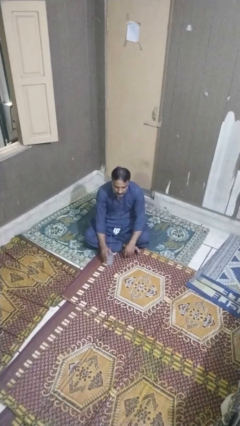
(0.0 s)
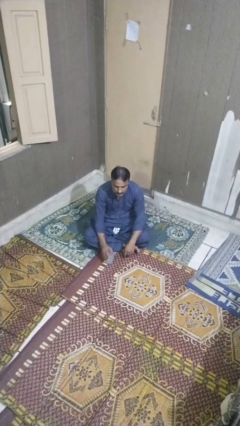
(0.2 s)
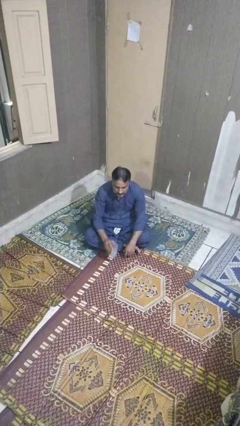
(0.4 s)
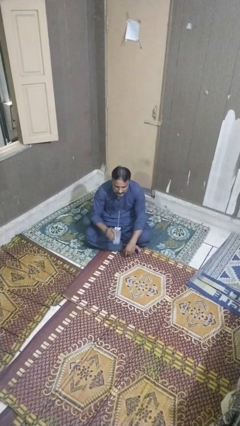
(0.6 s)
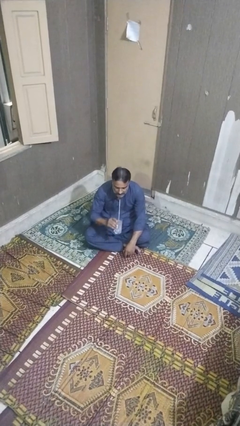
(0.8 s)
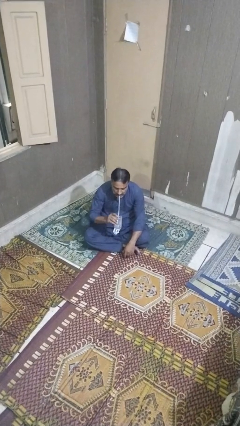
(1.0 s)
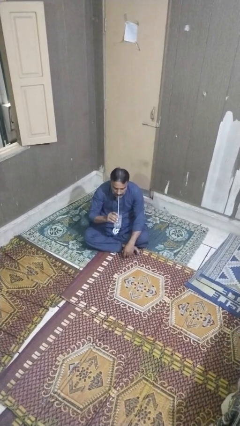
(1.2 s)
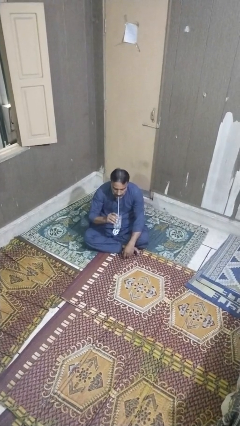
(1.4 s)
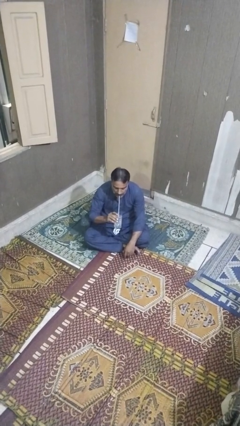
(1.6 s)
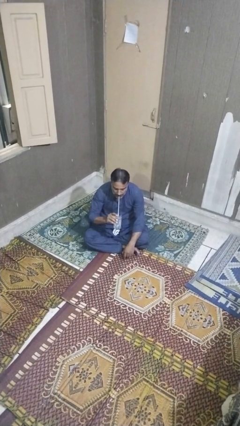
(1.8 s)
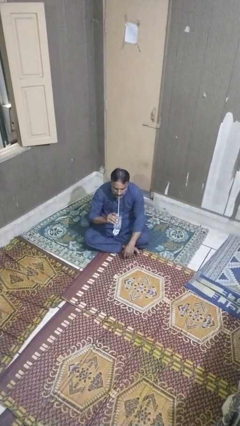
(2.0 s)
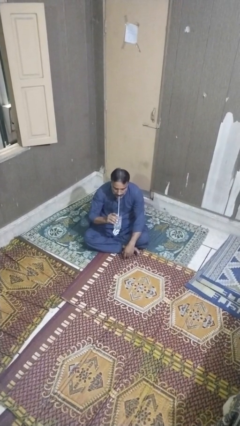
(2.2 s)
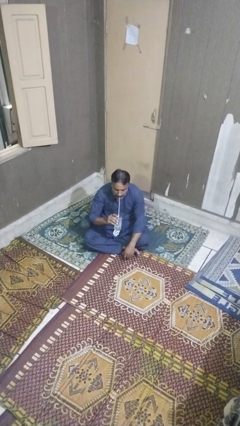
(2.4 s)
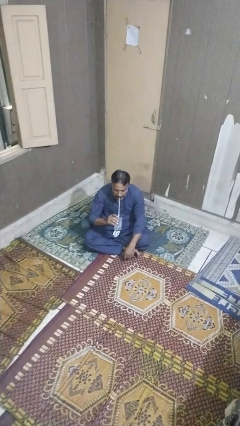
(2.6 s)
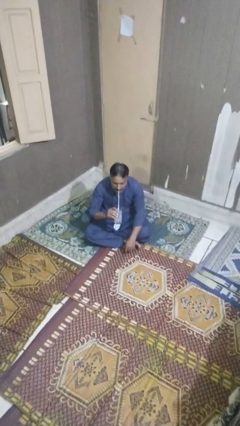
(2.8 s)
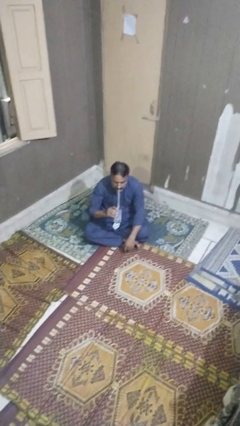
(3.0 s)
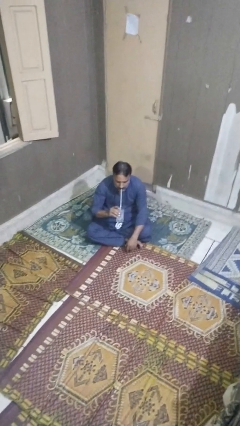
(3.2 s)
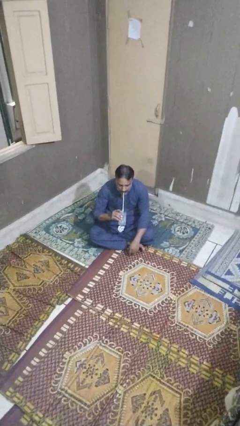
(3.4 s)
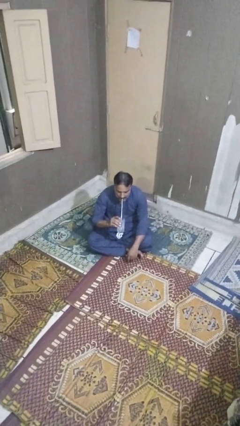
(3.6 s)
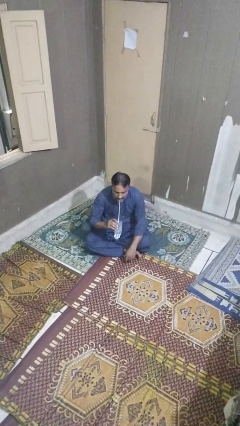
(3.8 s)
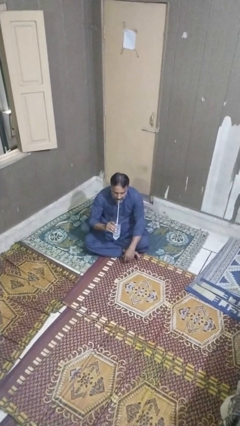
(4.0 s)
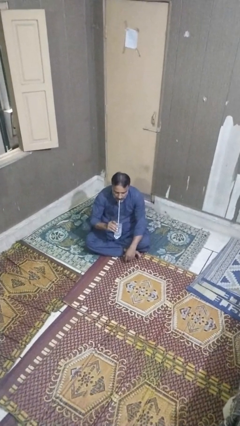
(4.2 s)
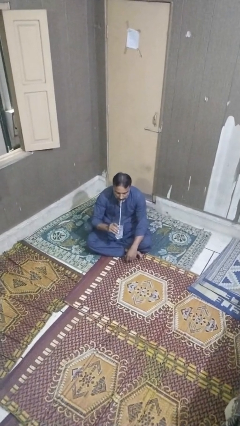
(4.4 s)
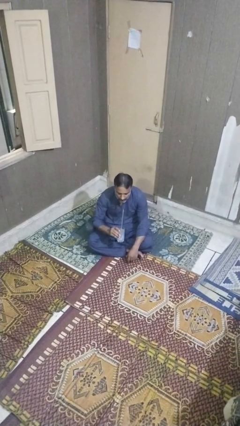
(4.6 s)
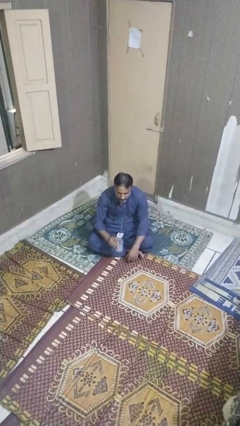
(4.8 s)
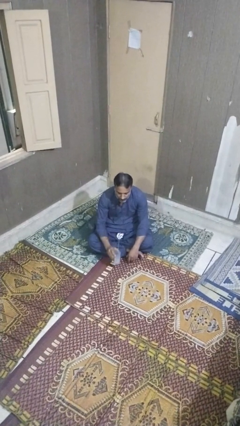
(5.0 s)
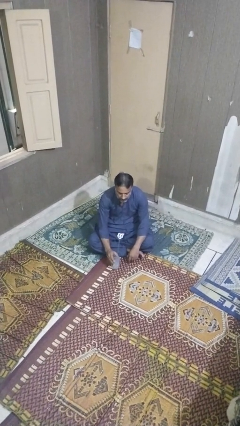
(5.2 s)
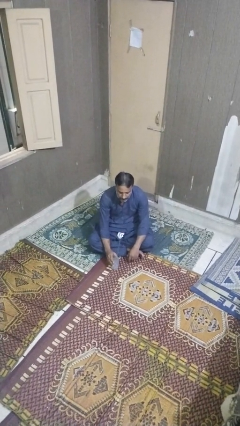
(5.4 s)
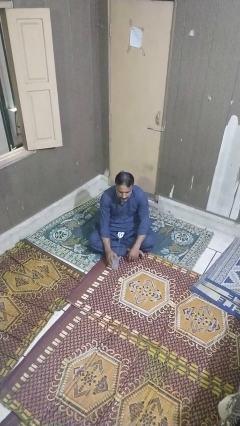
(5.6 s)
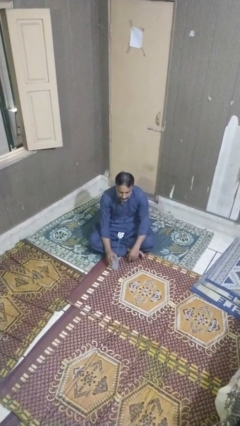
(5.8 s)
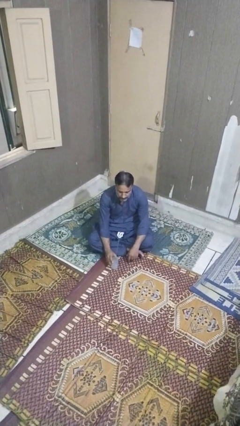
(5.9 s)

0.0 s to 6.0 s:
person drinks from straw

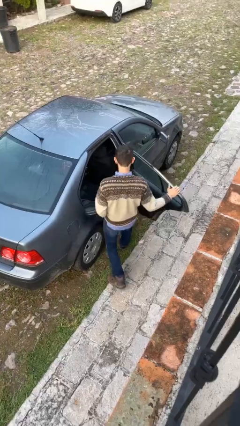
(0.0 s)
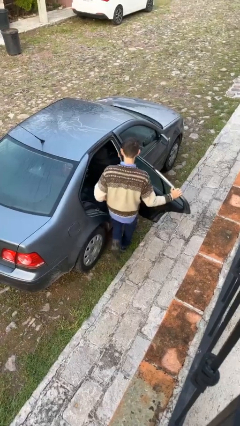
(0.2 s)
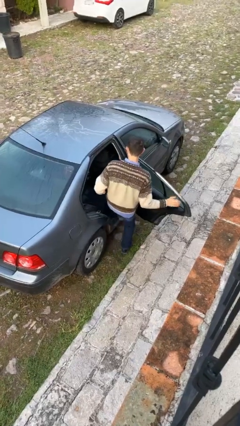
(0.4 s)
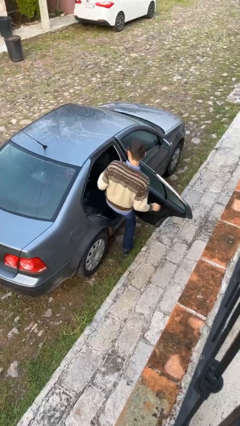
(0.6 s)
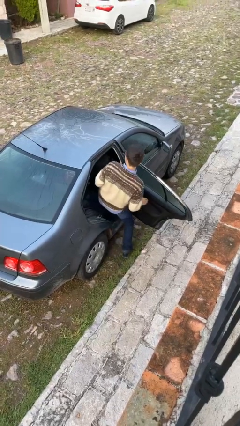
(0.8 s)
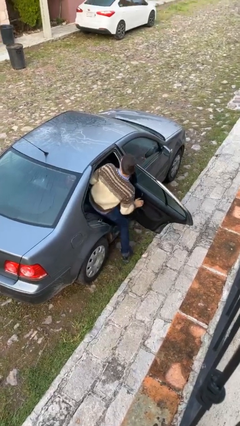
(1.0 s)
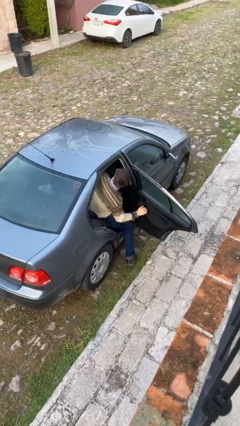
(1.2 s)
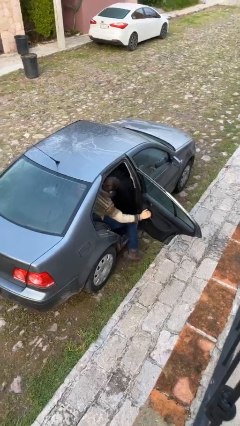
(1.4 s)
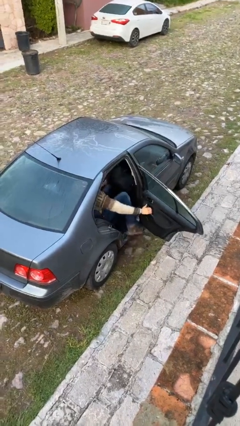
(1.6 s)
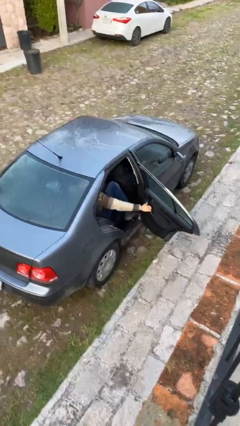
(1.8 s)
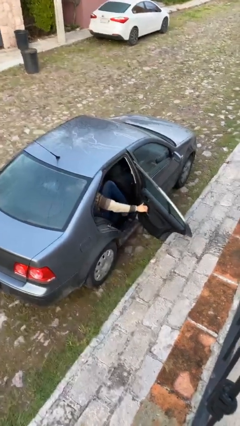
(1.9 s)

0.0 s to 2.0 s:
person enters car

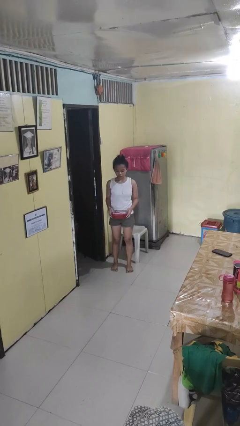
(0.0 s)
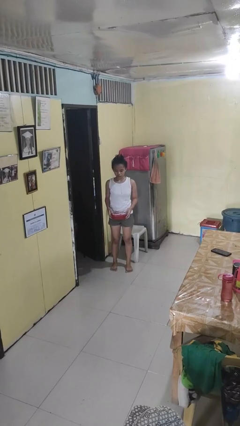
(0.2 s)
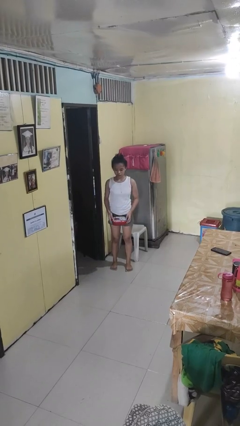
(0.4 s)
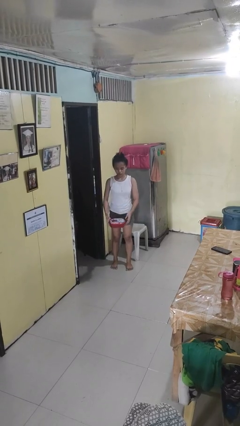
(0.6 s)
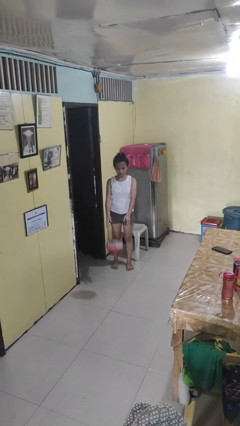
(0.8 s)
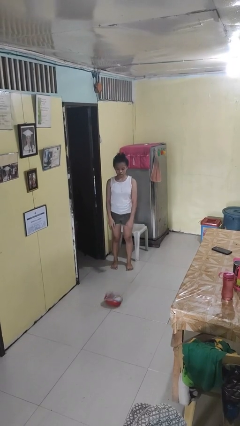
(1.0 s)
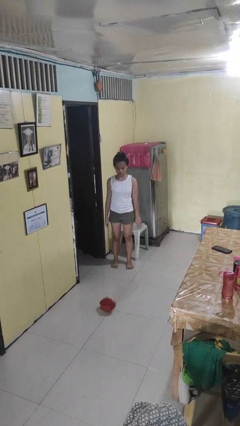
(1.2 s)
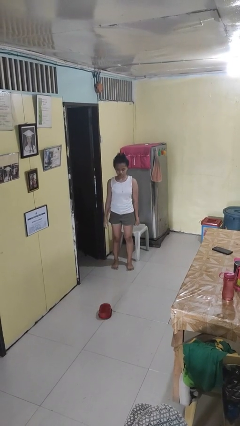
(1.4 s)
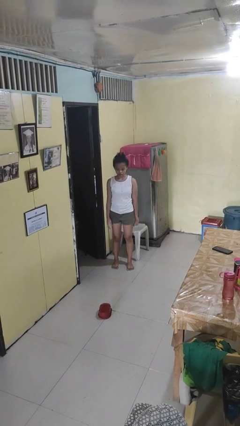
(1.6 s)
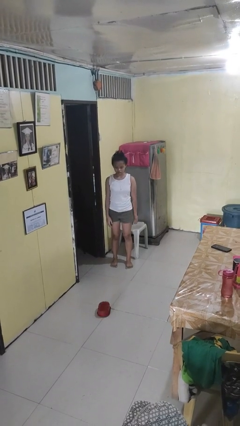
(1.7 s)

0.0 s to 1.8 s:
person throws object to ground

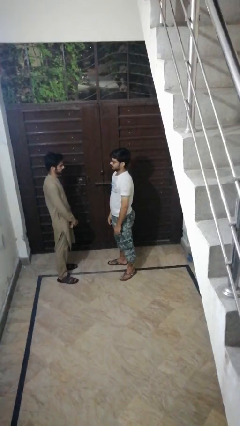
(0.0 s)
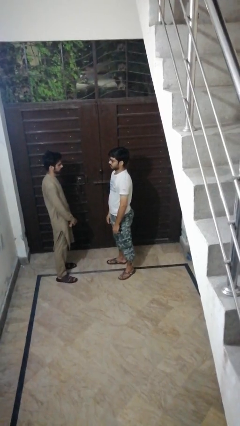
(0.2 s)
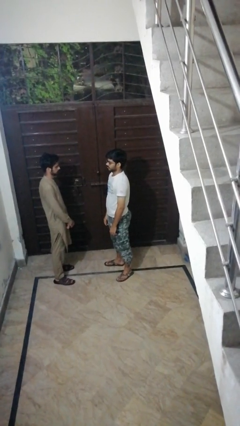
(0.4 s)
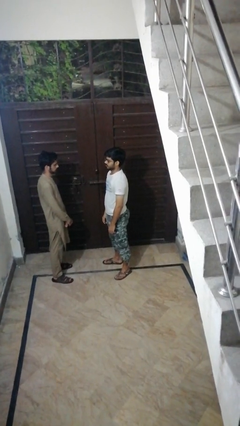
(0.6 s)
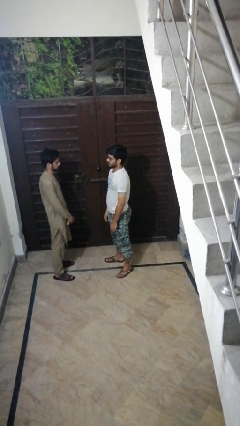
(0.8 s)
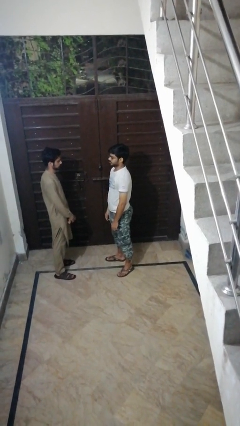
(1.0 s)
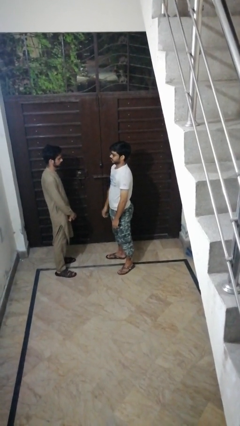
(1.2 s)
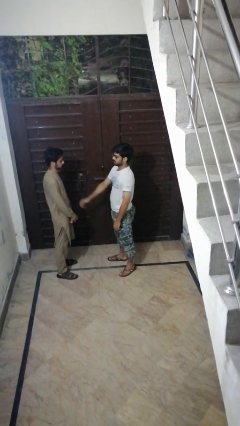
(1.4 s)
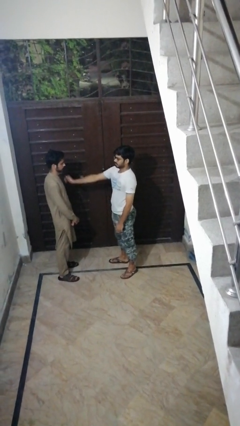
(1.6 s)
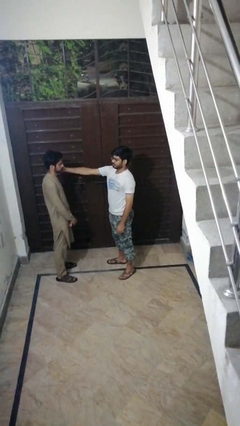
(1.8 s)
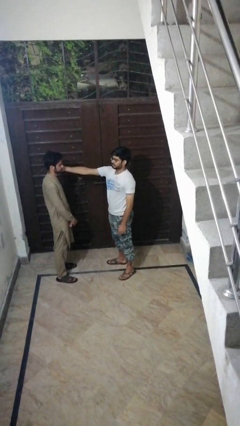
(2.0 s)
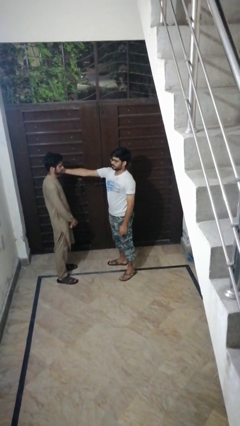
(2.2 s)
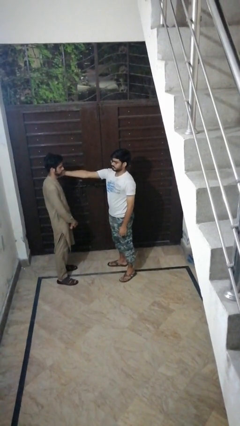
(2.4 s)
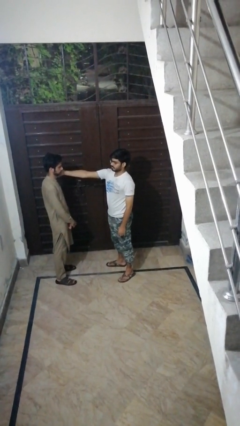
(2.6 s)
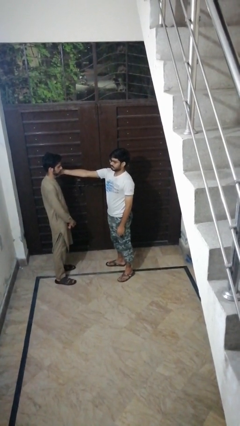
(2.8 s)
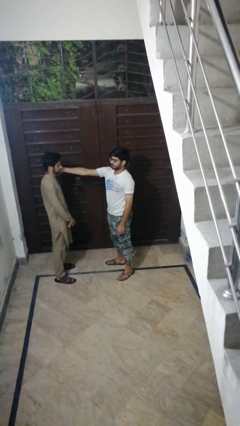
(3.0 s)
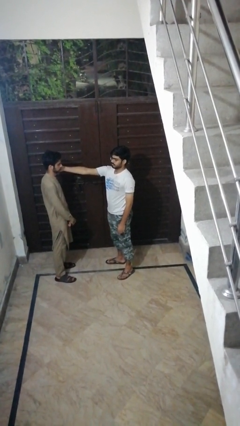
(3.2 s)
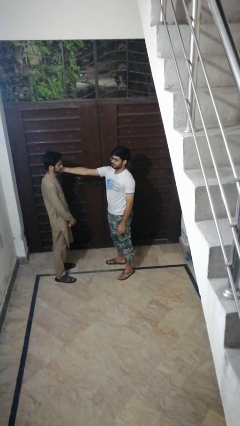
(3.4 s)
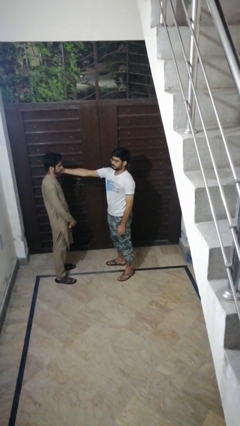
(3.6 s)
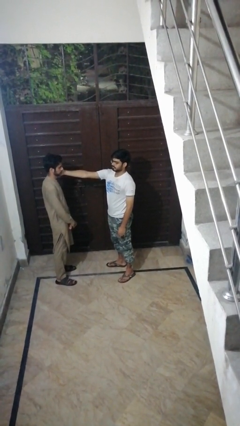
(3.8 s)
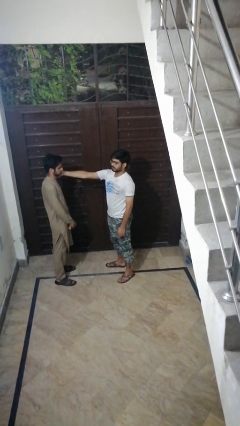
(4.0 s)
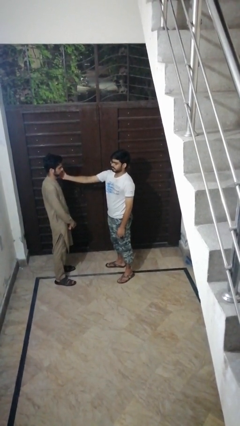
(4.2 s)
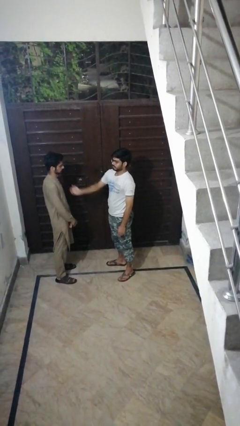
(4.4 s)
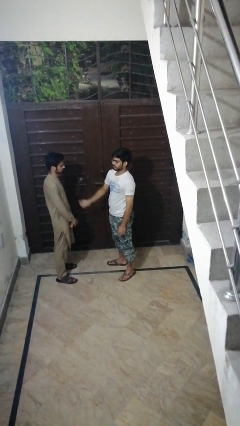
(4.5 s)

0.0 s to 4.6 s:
person touches face of person

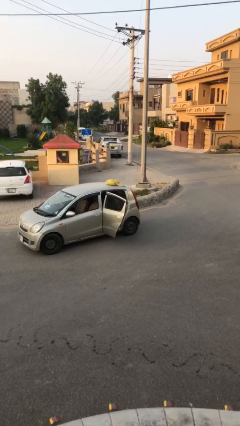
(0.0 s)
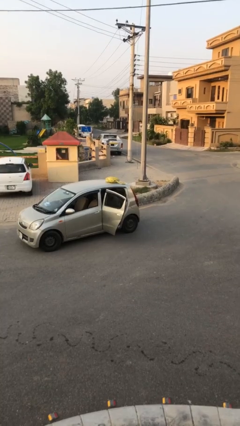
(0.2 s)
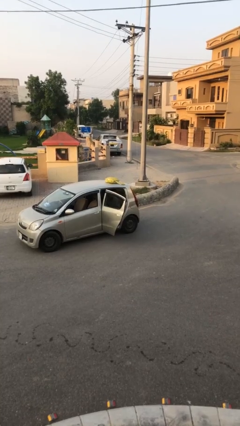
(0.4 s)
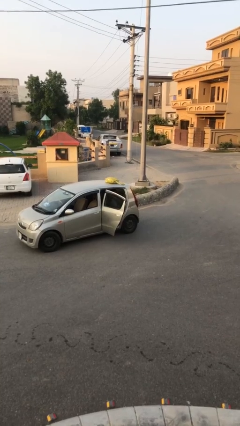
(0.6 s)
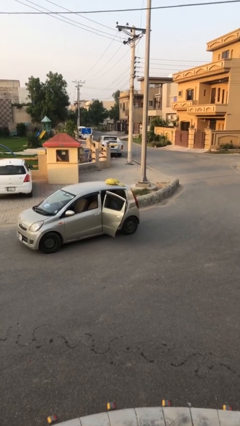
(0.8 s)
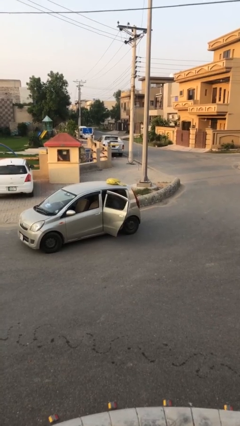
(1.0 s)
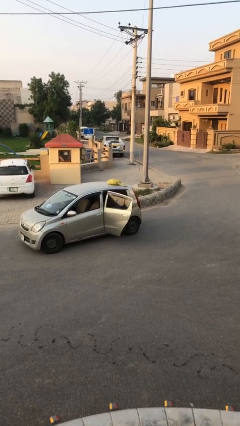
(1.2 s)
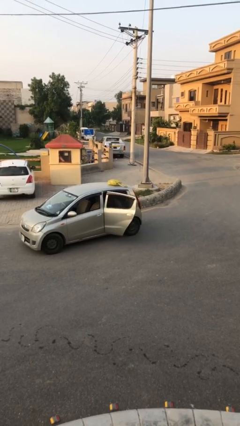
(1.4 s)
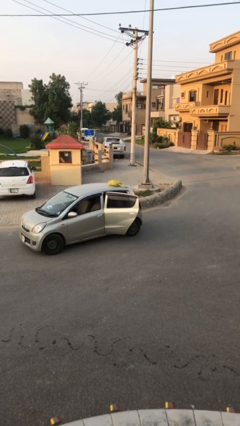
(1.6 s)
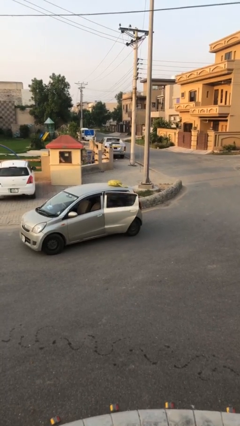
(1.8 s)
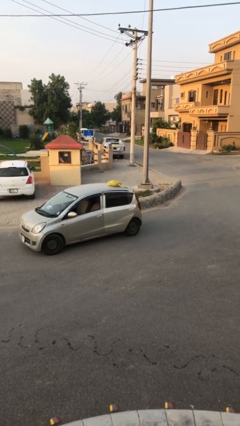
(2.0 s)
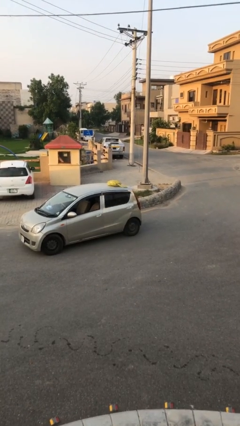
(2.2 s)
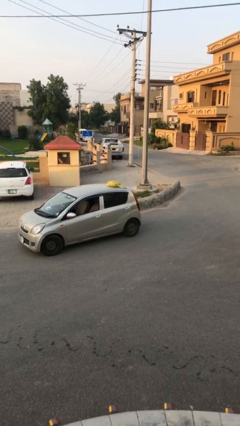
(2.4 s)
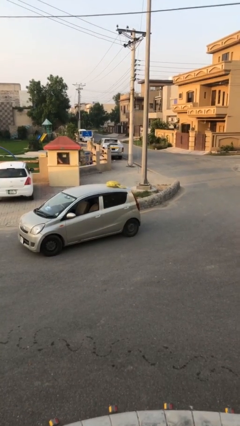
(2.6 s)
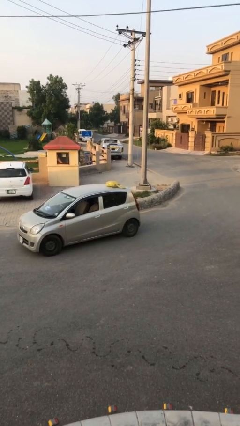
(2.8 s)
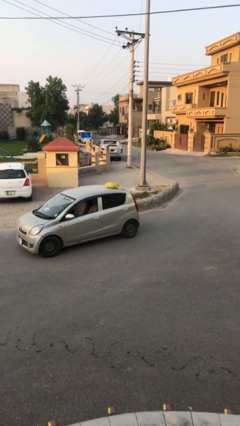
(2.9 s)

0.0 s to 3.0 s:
person closes car door

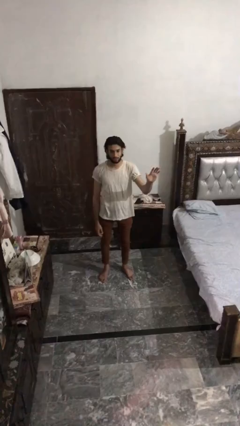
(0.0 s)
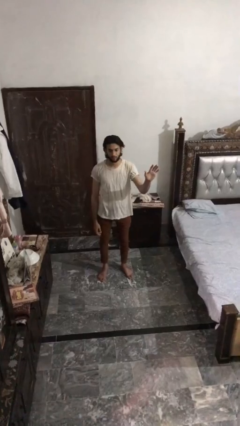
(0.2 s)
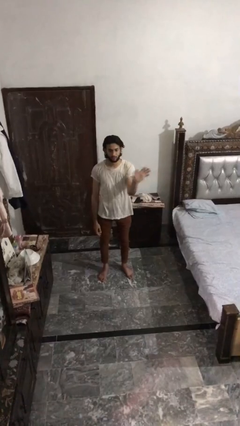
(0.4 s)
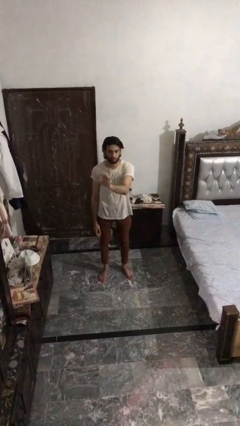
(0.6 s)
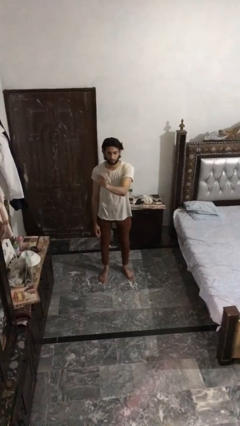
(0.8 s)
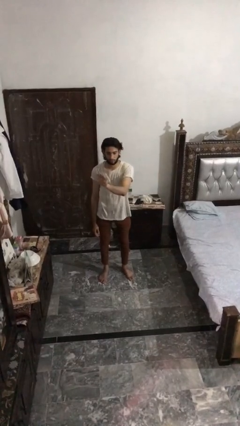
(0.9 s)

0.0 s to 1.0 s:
person gestures swipe right
